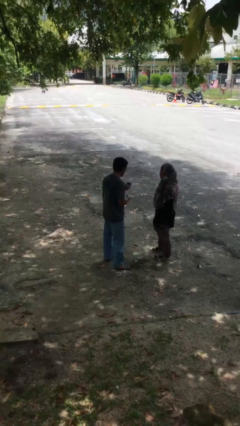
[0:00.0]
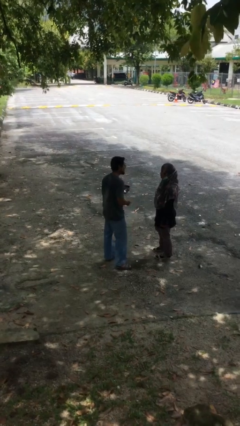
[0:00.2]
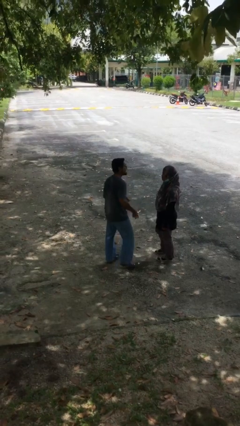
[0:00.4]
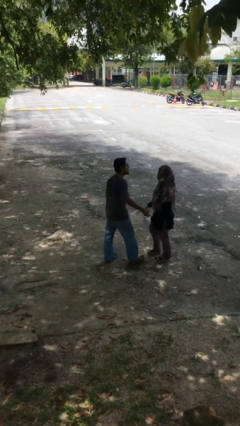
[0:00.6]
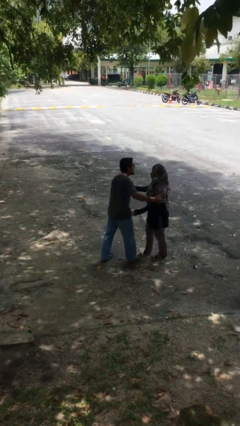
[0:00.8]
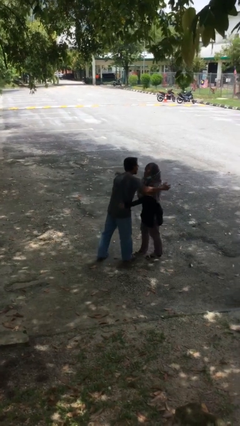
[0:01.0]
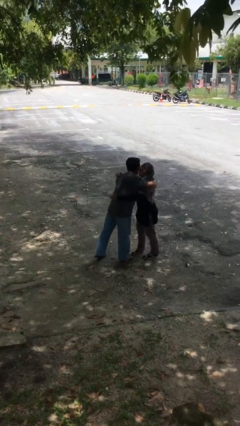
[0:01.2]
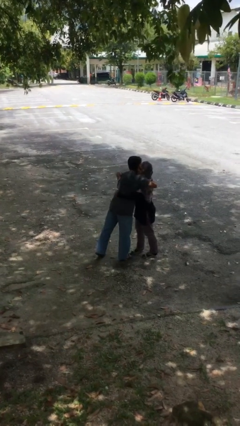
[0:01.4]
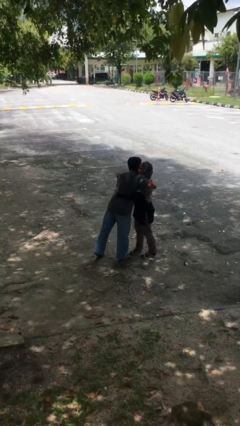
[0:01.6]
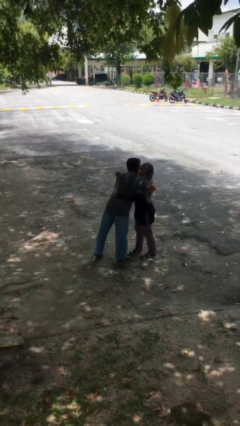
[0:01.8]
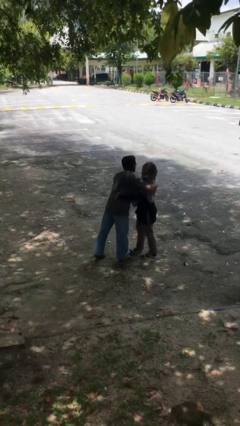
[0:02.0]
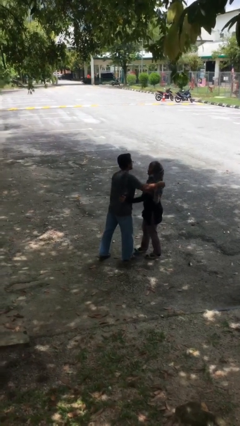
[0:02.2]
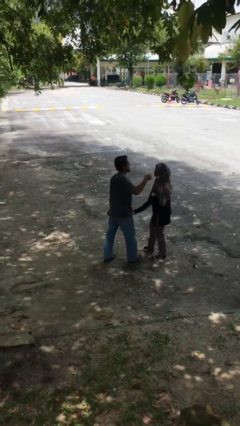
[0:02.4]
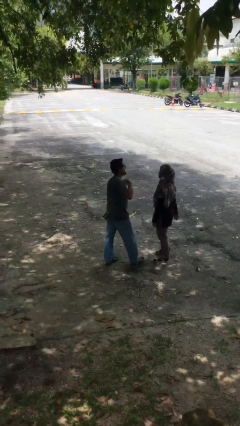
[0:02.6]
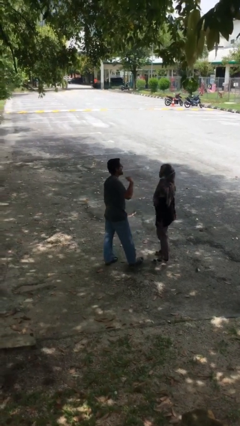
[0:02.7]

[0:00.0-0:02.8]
person embraces person

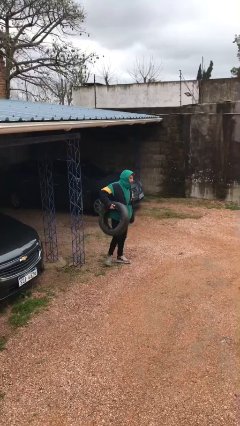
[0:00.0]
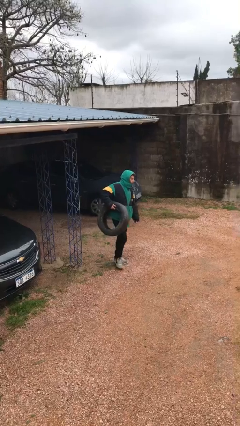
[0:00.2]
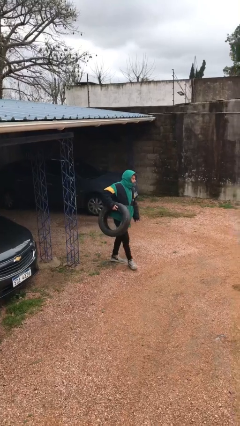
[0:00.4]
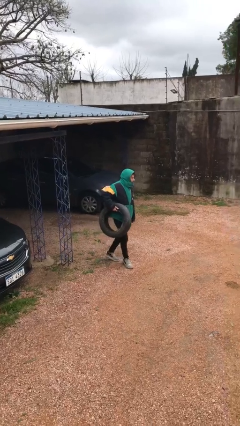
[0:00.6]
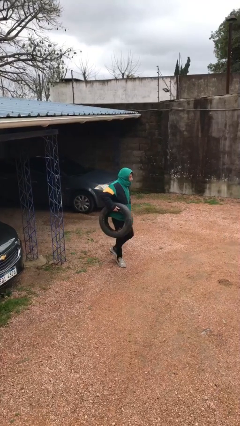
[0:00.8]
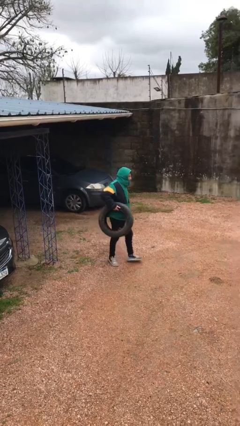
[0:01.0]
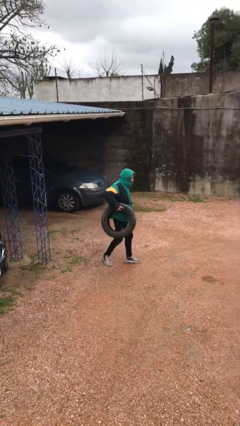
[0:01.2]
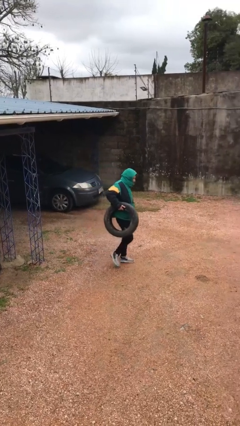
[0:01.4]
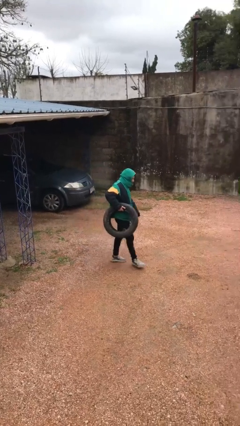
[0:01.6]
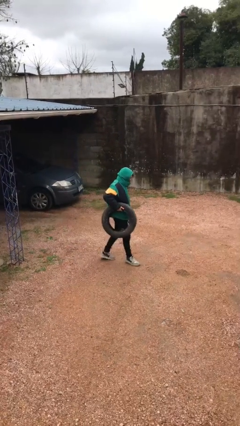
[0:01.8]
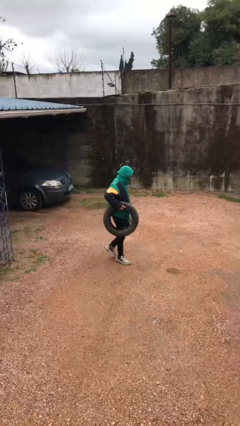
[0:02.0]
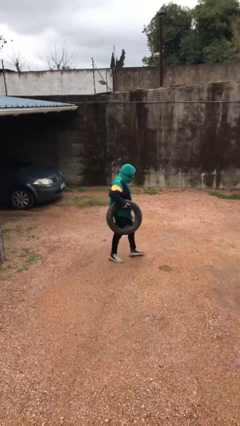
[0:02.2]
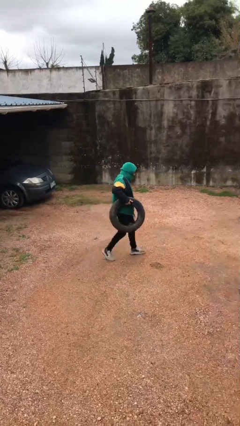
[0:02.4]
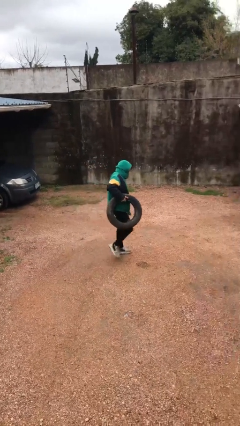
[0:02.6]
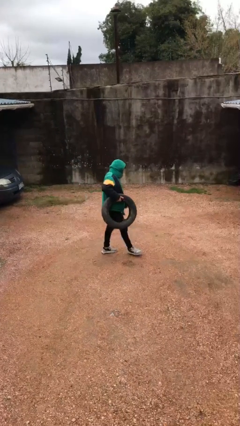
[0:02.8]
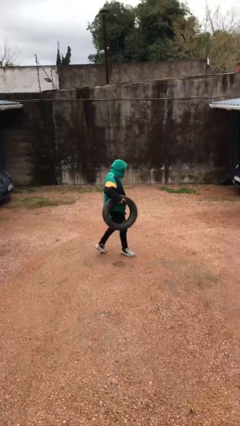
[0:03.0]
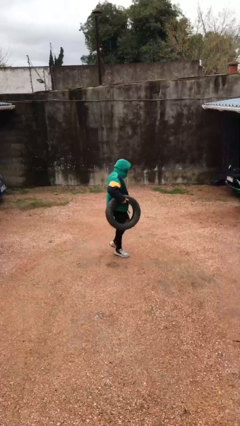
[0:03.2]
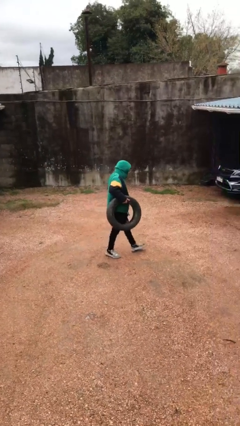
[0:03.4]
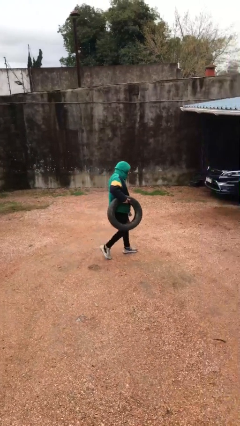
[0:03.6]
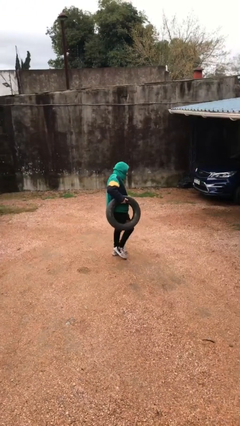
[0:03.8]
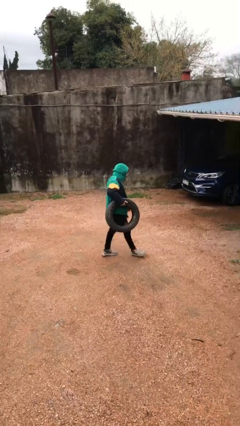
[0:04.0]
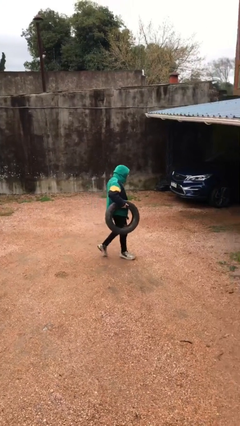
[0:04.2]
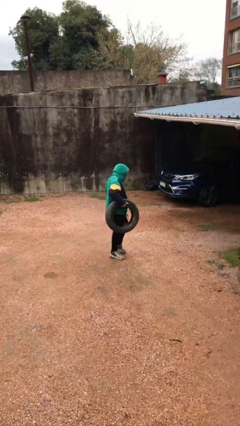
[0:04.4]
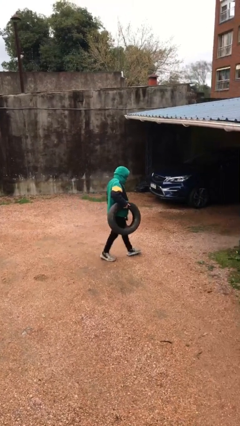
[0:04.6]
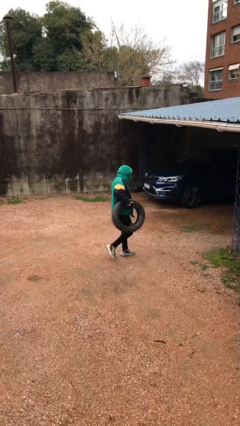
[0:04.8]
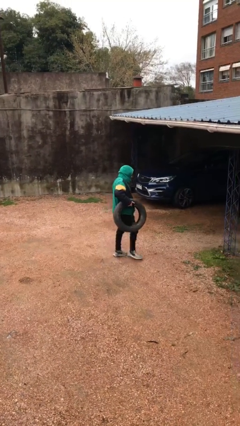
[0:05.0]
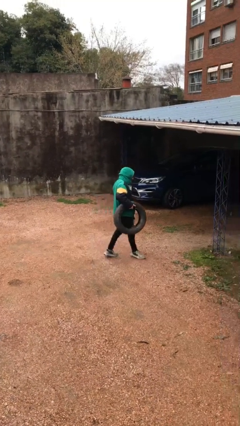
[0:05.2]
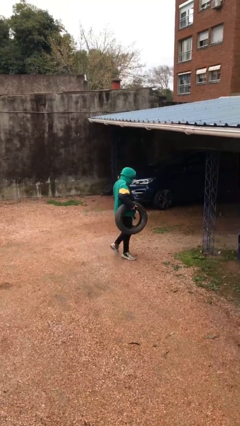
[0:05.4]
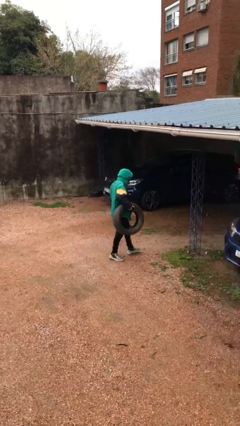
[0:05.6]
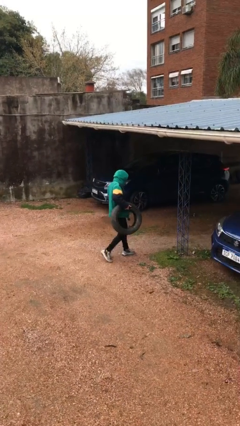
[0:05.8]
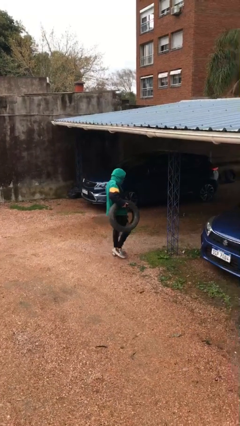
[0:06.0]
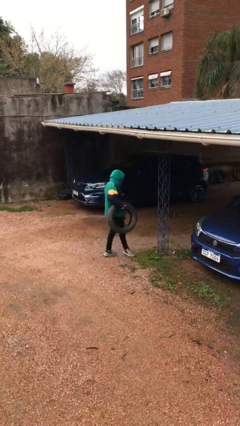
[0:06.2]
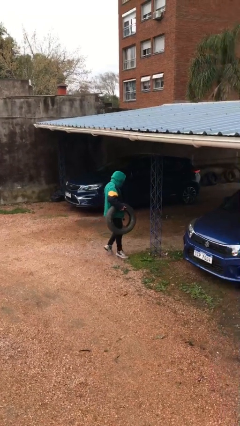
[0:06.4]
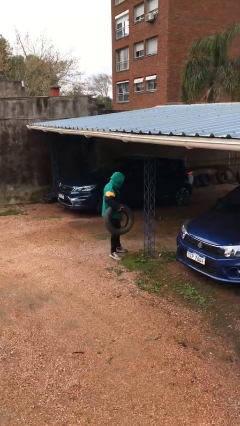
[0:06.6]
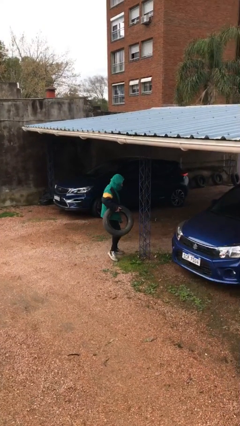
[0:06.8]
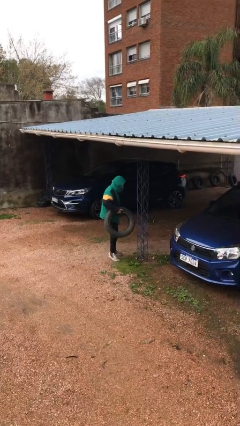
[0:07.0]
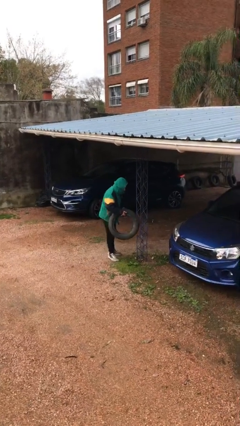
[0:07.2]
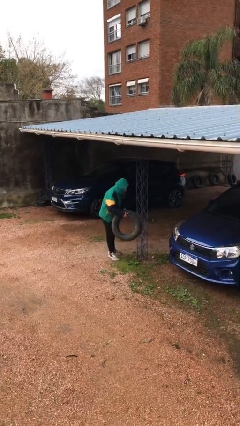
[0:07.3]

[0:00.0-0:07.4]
person carries heavy object

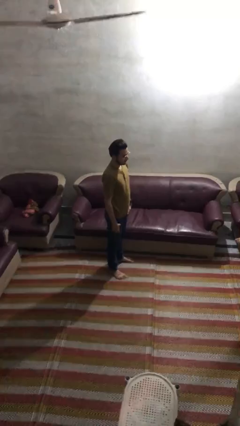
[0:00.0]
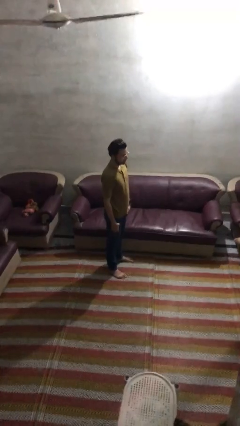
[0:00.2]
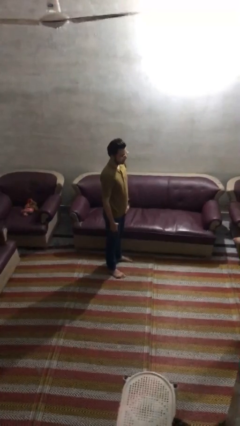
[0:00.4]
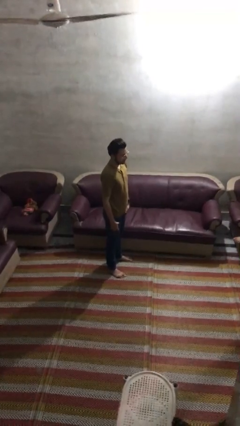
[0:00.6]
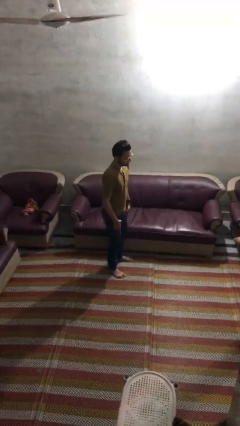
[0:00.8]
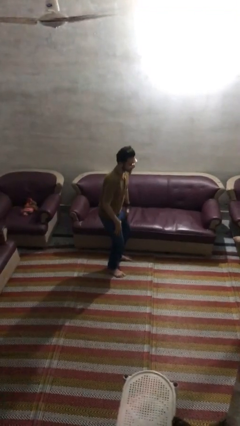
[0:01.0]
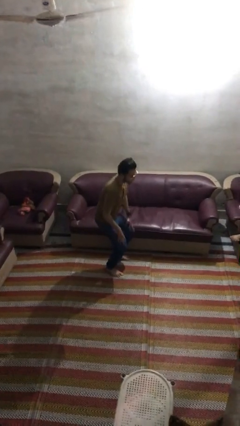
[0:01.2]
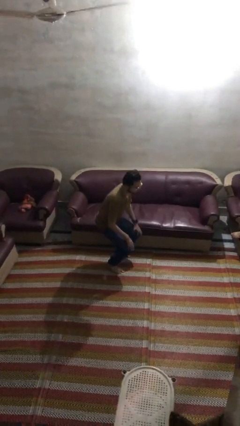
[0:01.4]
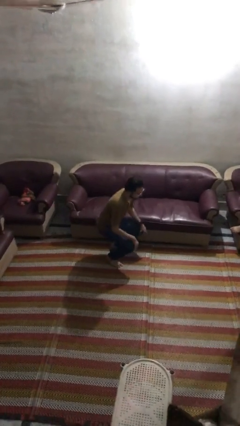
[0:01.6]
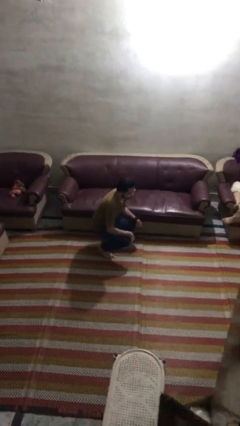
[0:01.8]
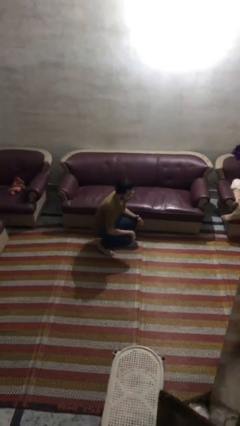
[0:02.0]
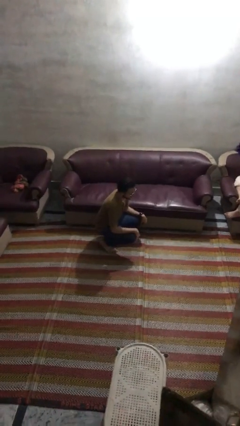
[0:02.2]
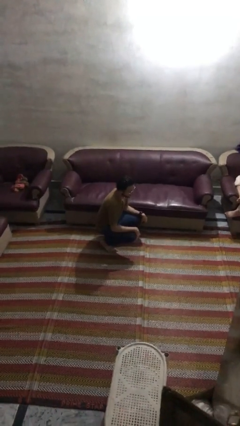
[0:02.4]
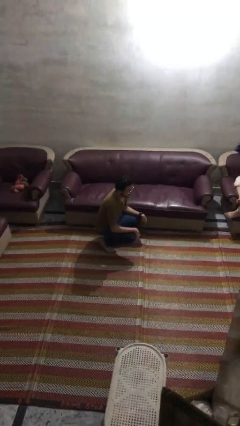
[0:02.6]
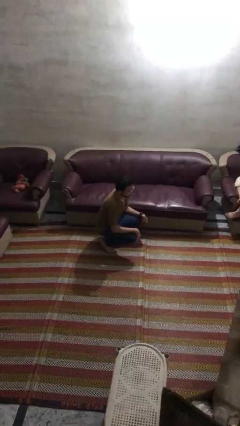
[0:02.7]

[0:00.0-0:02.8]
person squats

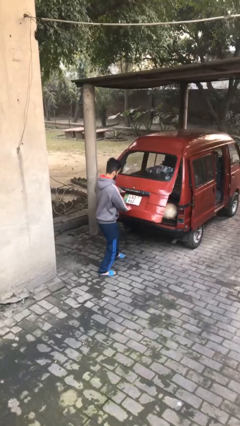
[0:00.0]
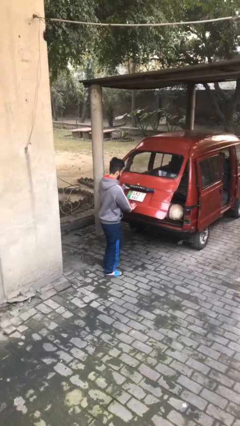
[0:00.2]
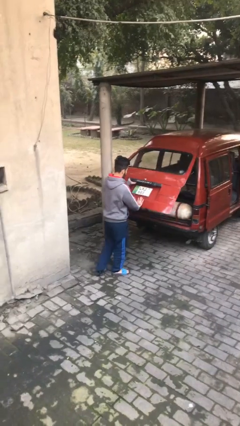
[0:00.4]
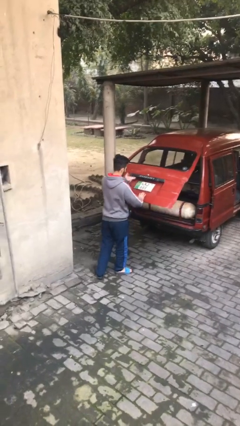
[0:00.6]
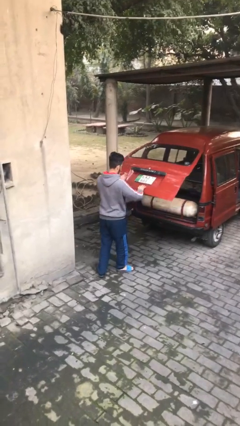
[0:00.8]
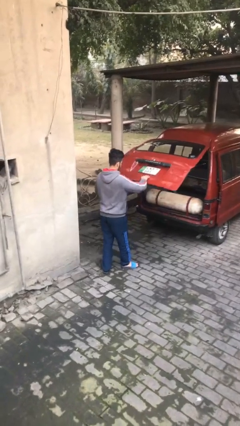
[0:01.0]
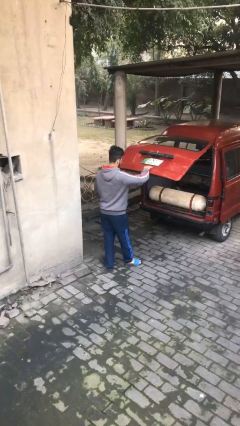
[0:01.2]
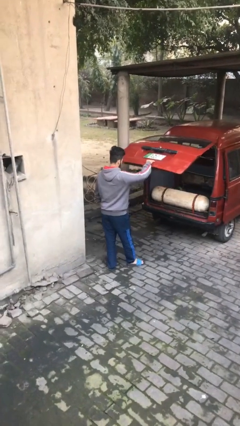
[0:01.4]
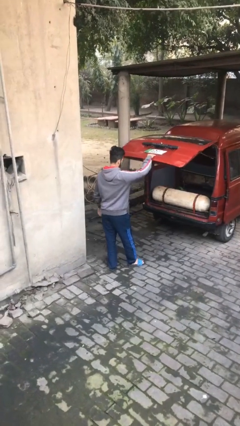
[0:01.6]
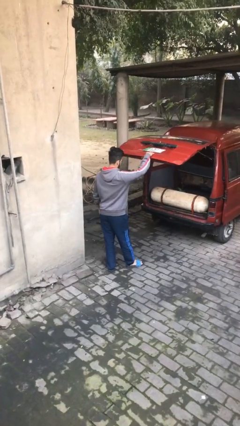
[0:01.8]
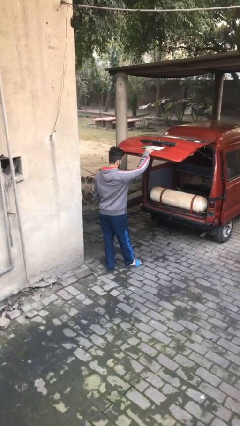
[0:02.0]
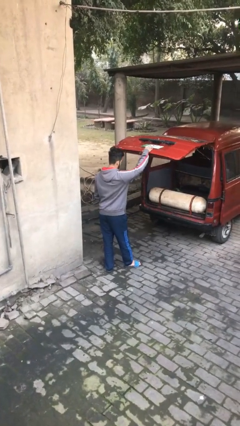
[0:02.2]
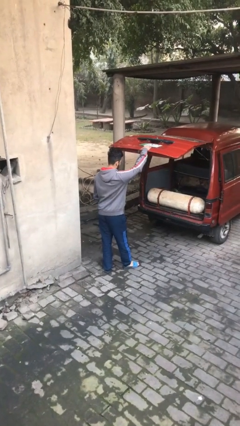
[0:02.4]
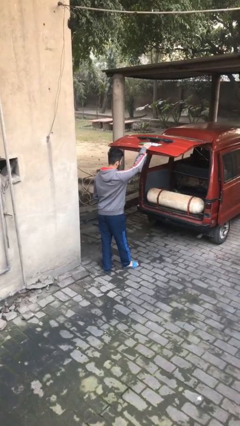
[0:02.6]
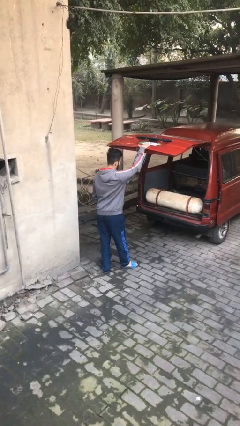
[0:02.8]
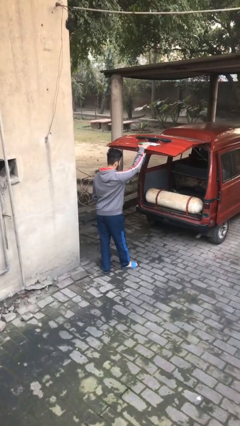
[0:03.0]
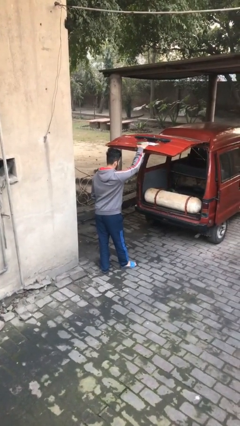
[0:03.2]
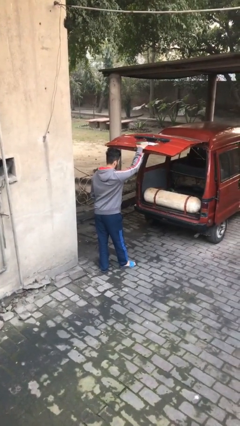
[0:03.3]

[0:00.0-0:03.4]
person opens car trunk

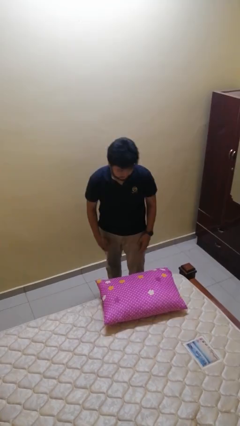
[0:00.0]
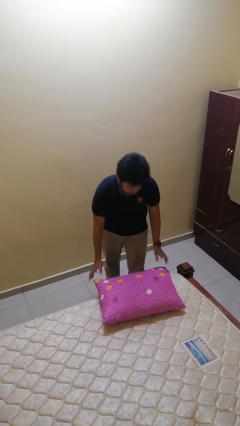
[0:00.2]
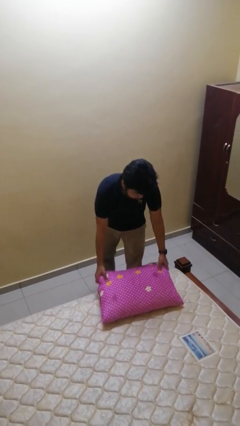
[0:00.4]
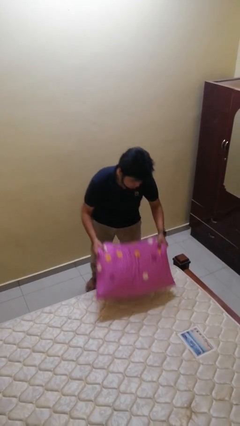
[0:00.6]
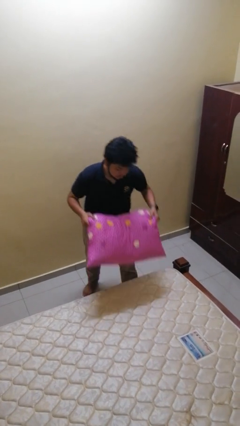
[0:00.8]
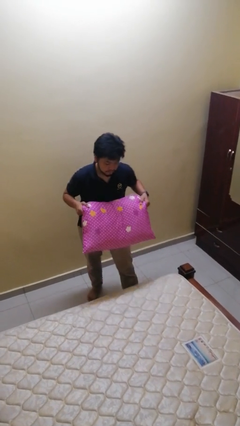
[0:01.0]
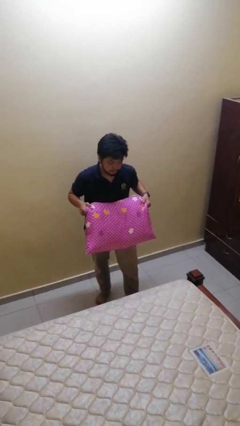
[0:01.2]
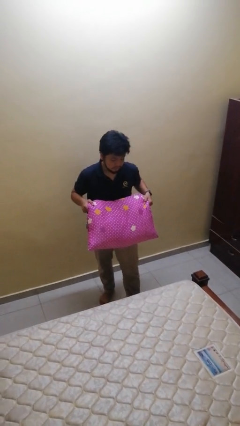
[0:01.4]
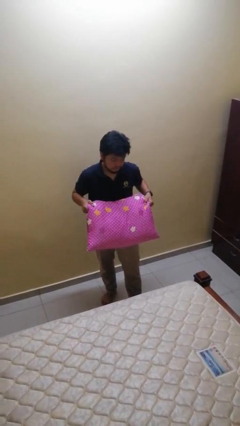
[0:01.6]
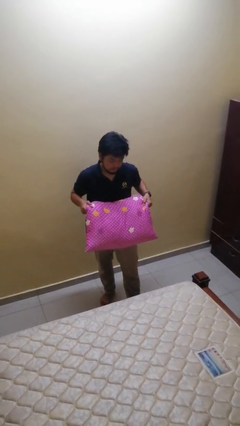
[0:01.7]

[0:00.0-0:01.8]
person picks up object from bed
